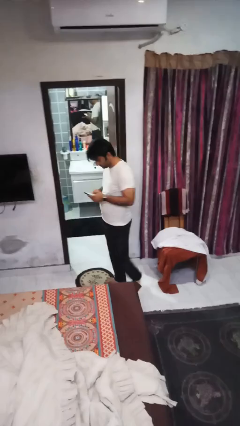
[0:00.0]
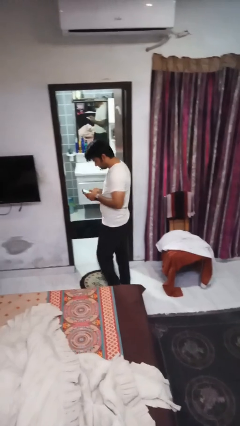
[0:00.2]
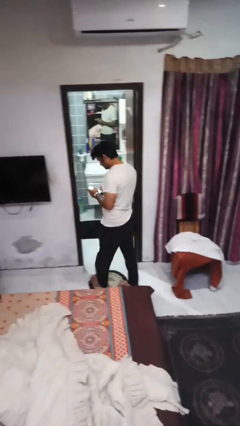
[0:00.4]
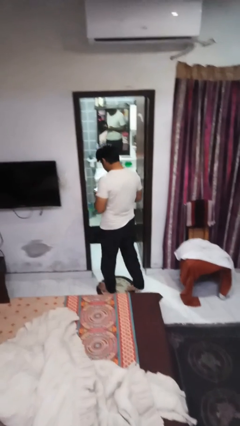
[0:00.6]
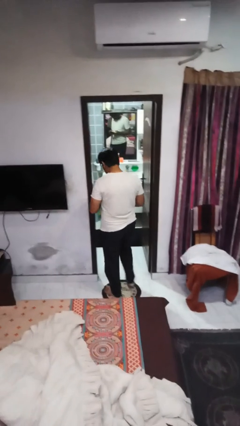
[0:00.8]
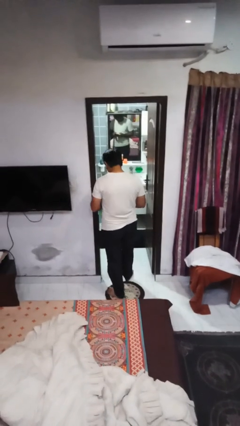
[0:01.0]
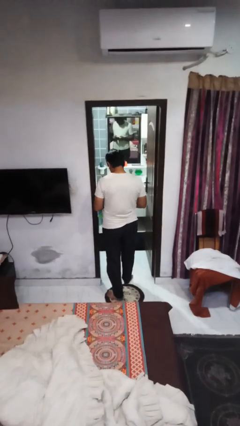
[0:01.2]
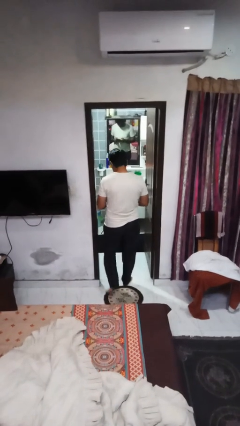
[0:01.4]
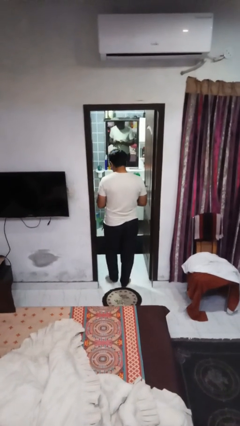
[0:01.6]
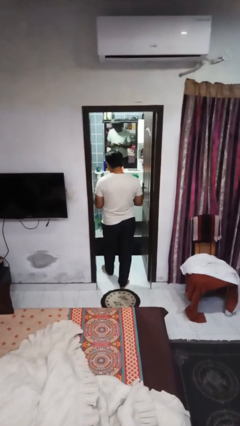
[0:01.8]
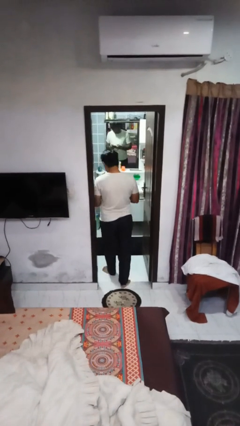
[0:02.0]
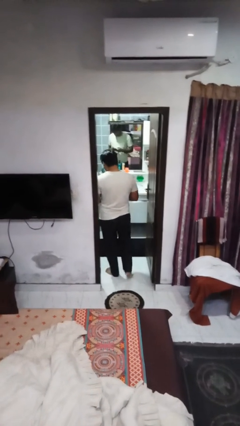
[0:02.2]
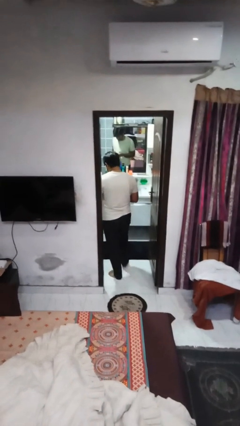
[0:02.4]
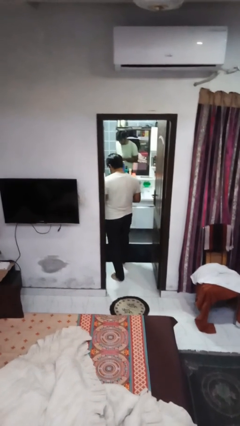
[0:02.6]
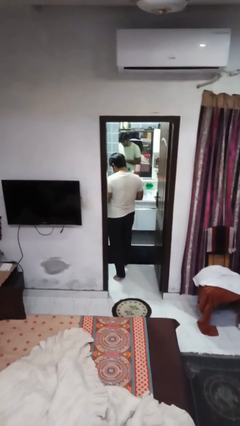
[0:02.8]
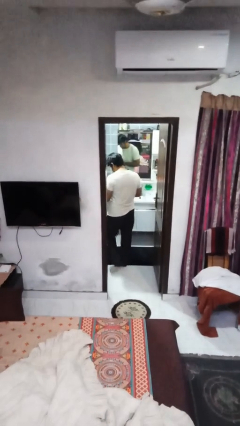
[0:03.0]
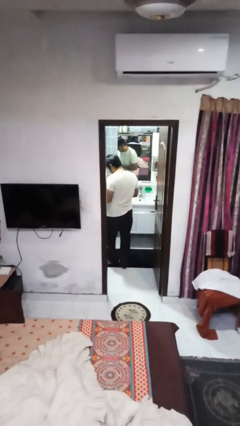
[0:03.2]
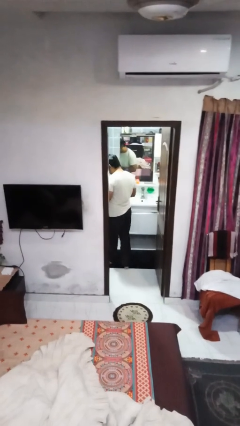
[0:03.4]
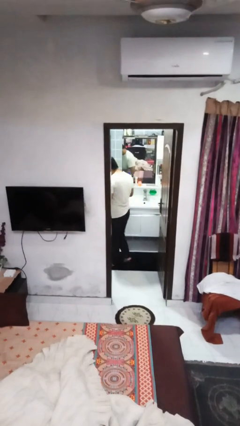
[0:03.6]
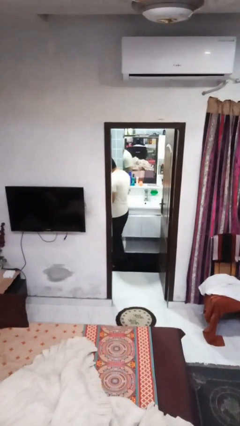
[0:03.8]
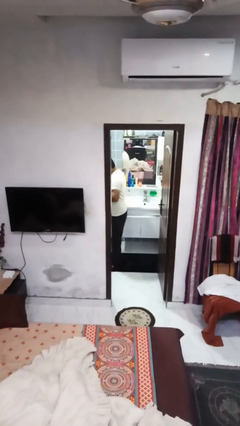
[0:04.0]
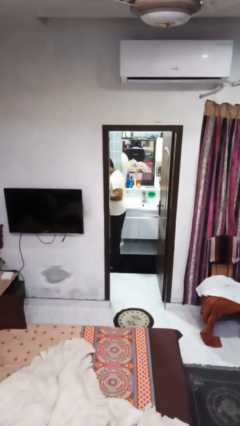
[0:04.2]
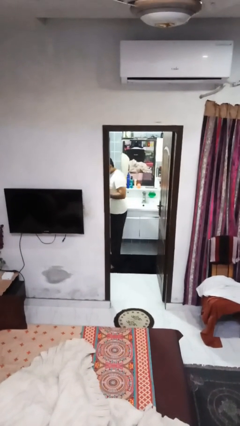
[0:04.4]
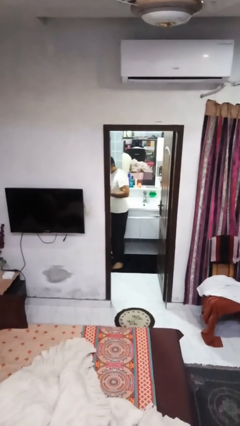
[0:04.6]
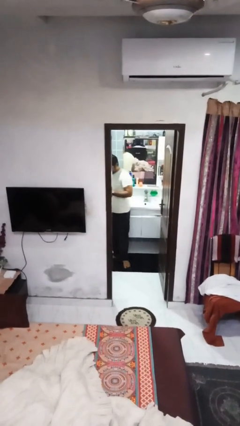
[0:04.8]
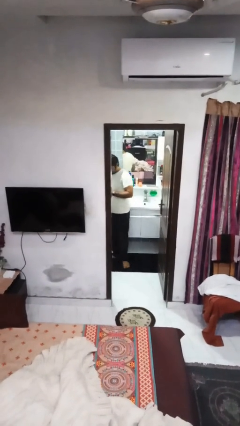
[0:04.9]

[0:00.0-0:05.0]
person exits scene through structure

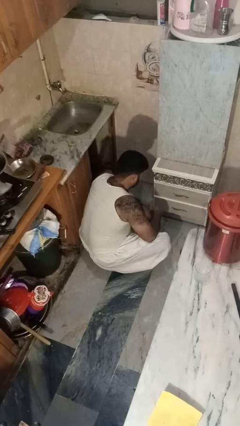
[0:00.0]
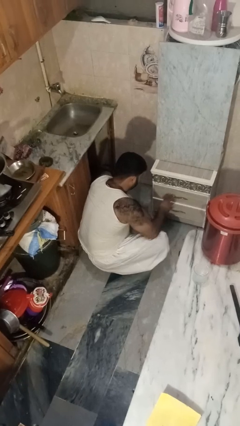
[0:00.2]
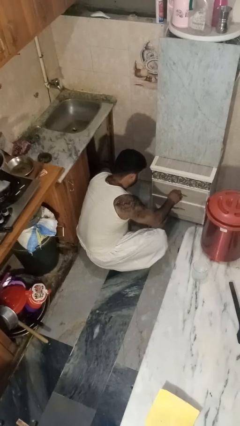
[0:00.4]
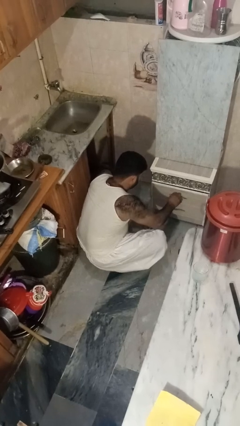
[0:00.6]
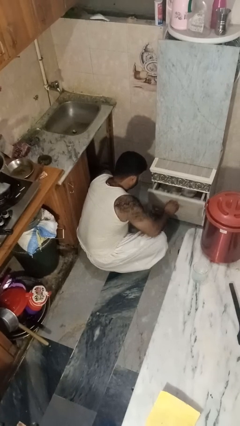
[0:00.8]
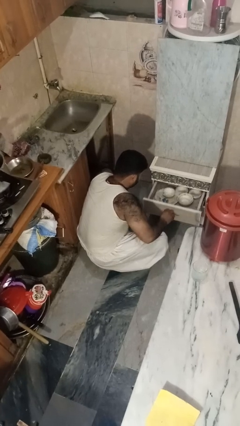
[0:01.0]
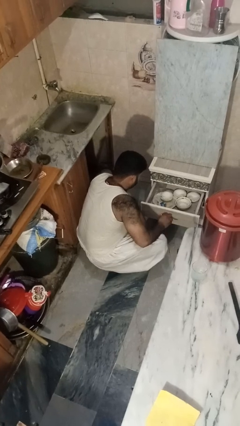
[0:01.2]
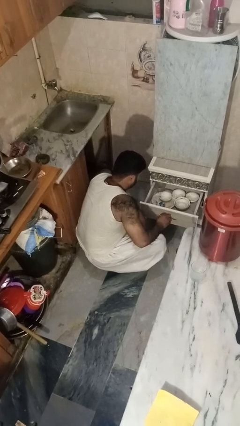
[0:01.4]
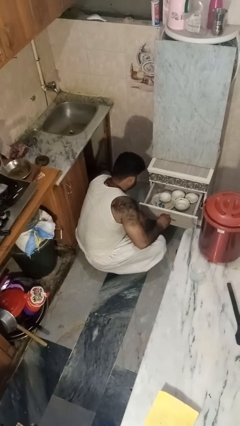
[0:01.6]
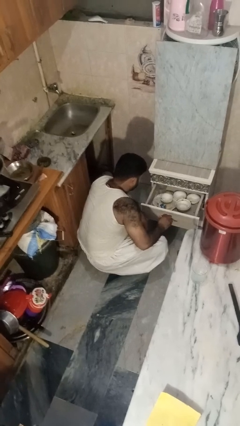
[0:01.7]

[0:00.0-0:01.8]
person opens kitchen drawer

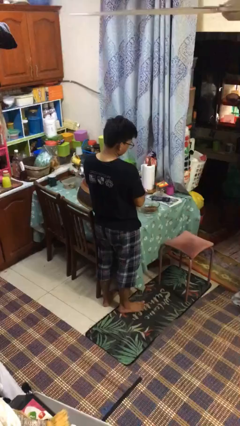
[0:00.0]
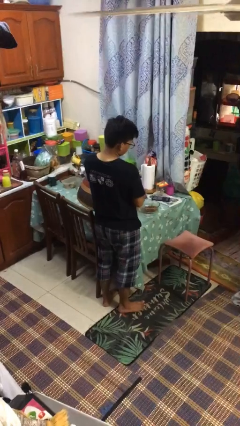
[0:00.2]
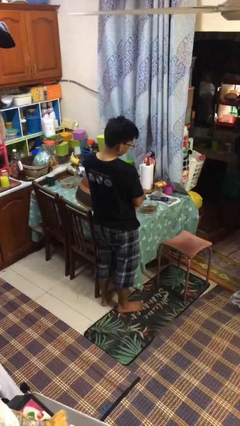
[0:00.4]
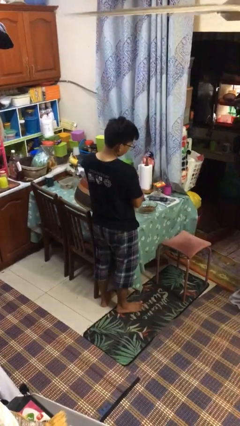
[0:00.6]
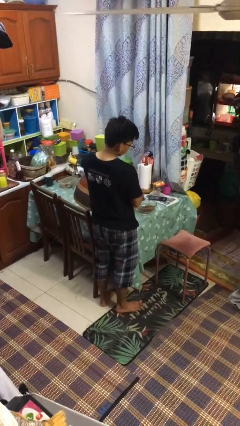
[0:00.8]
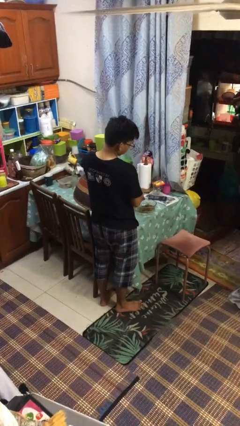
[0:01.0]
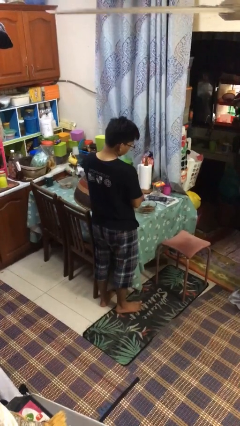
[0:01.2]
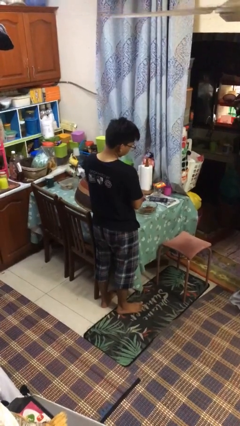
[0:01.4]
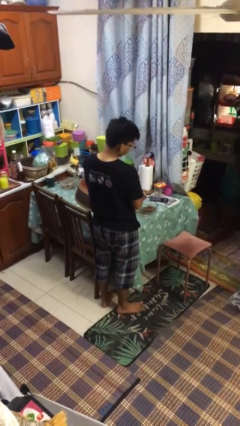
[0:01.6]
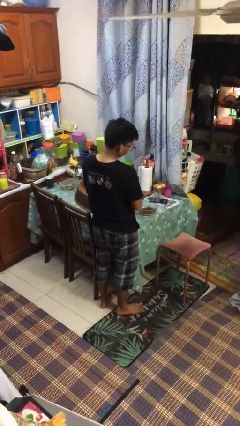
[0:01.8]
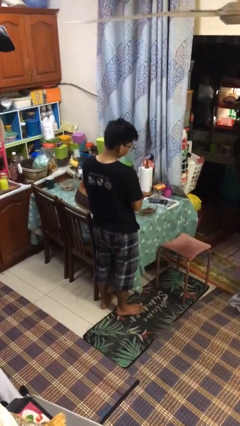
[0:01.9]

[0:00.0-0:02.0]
person pours into bowl

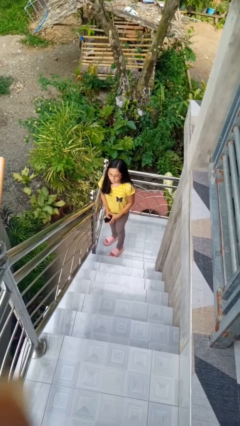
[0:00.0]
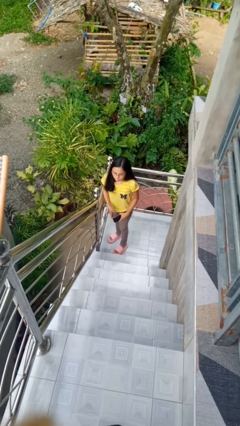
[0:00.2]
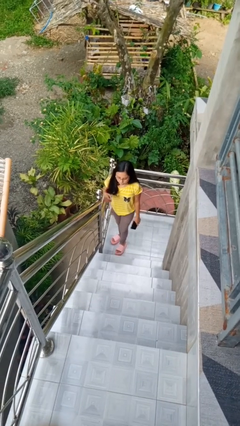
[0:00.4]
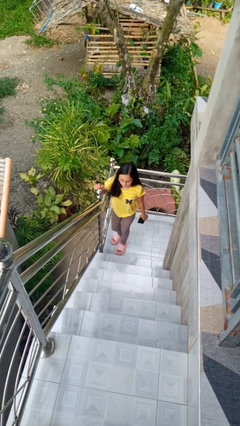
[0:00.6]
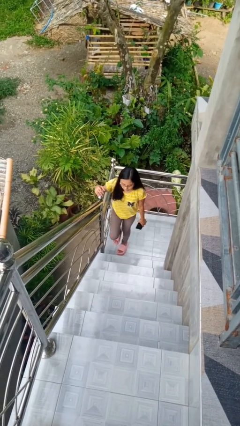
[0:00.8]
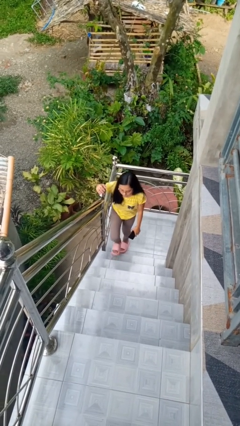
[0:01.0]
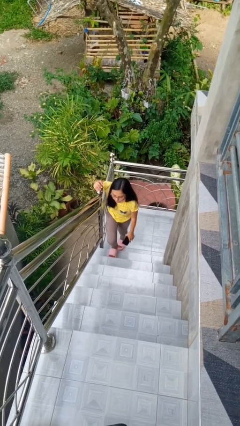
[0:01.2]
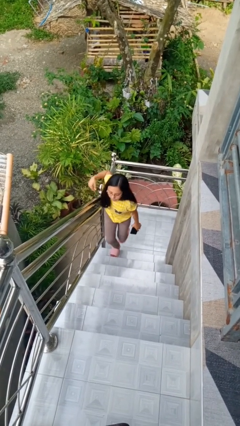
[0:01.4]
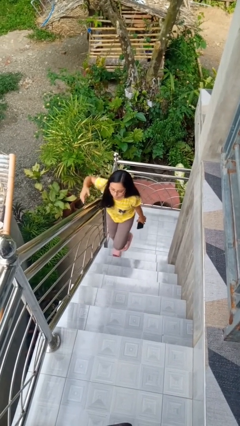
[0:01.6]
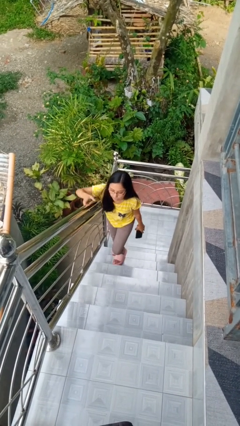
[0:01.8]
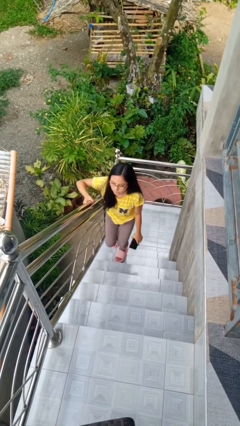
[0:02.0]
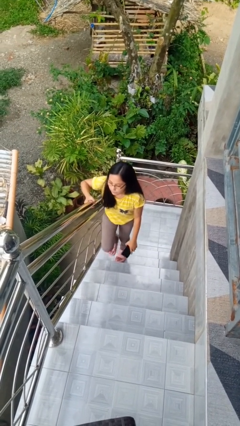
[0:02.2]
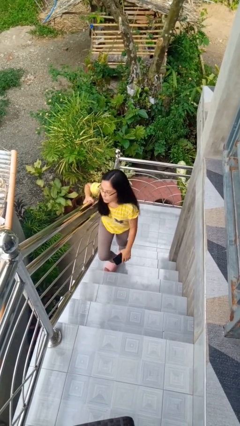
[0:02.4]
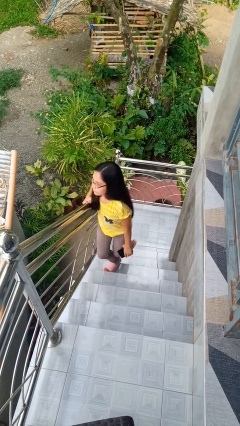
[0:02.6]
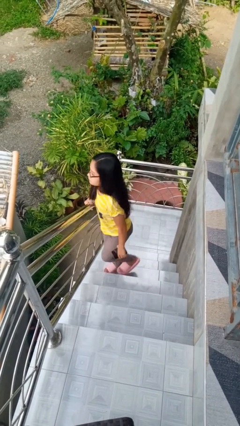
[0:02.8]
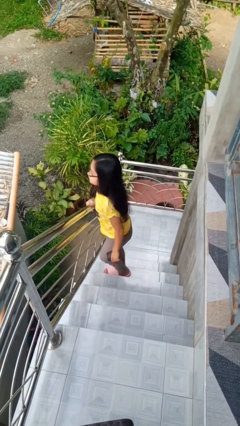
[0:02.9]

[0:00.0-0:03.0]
person climbs up stairs

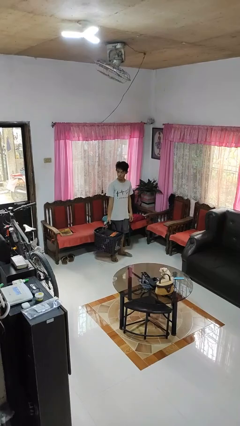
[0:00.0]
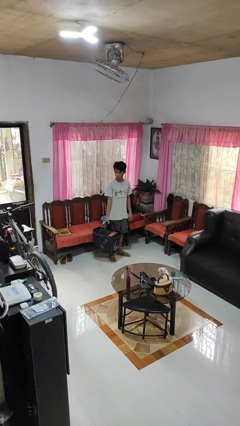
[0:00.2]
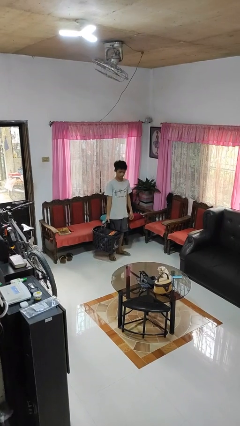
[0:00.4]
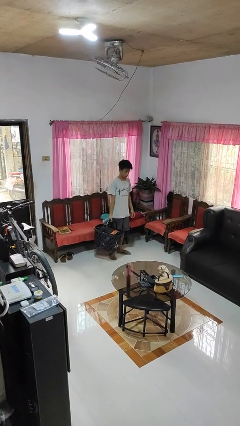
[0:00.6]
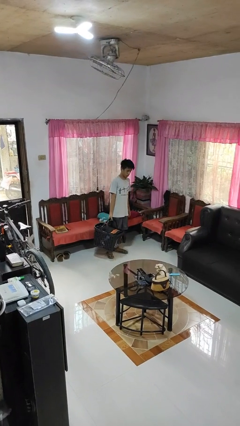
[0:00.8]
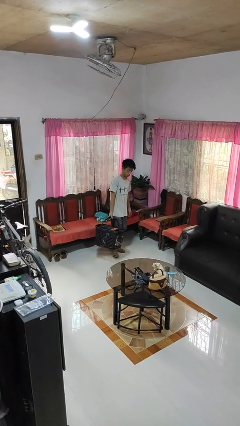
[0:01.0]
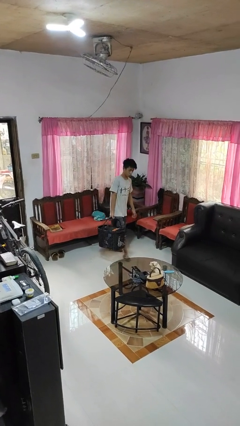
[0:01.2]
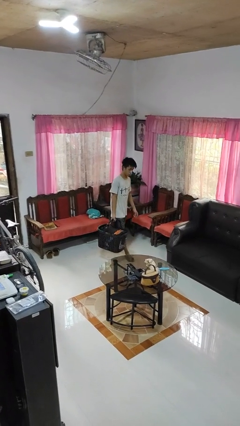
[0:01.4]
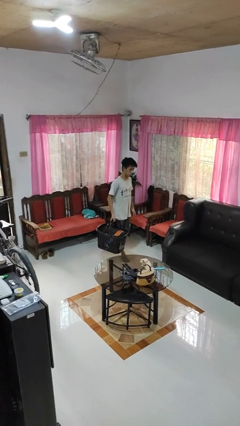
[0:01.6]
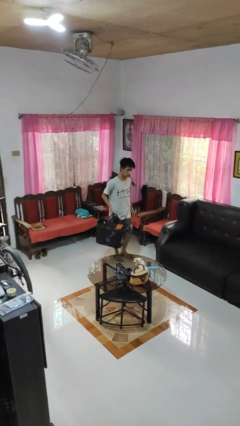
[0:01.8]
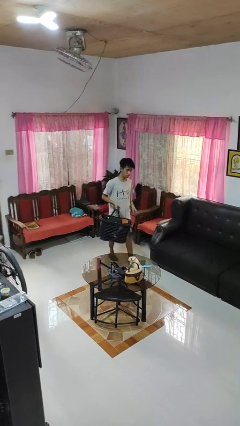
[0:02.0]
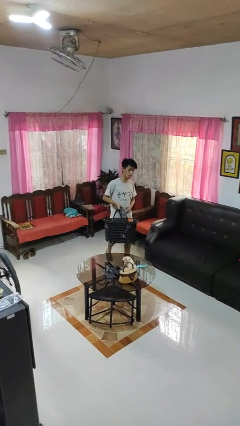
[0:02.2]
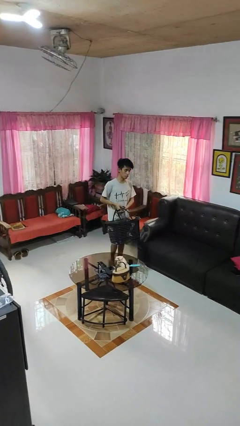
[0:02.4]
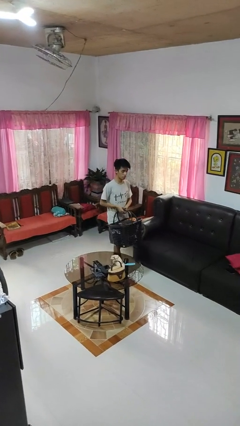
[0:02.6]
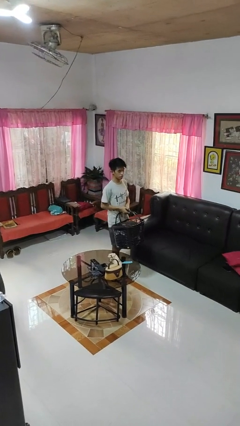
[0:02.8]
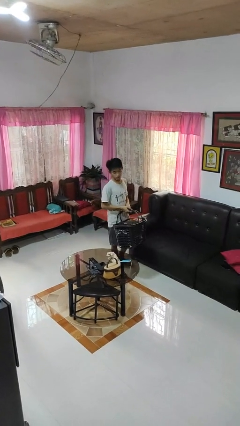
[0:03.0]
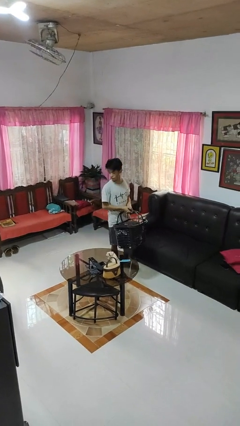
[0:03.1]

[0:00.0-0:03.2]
person carries laundry basket

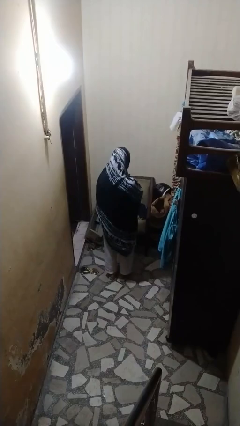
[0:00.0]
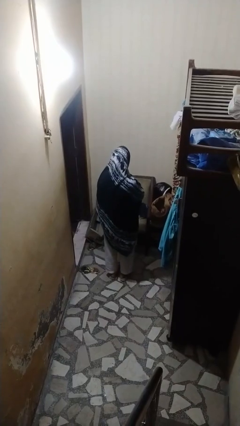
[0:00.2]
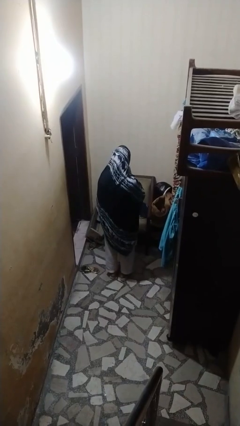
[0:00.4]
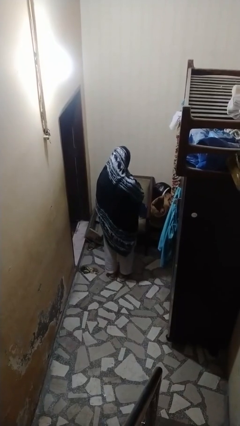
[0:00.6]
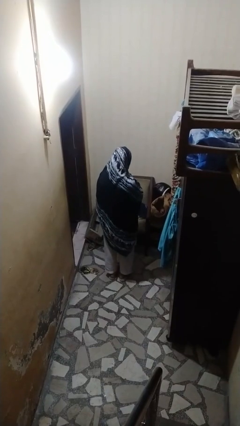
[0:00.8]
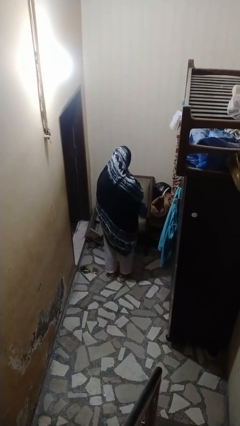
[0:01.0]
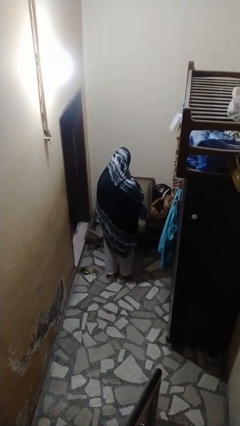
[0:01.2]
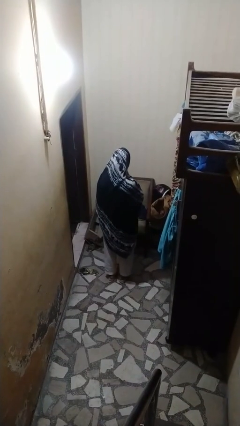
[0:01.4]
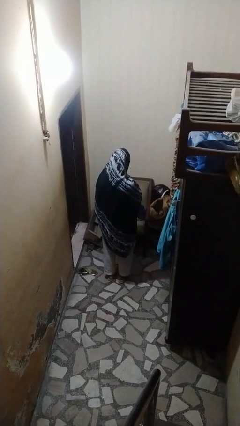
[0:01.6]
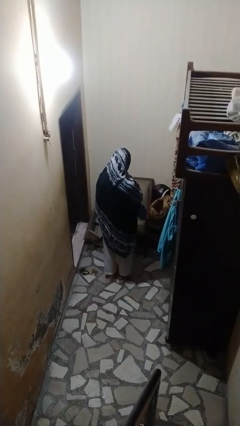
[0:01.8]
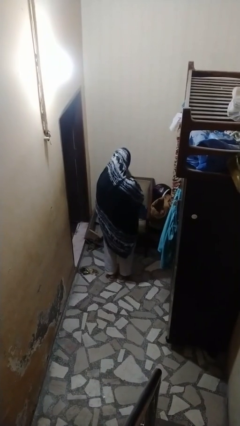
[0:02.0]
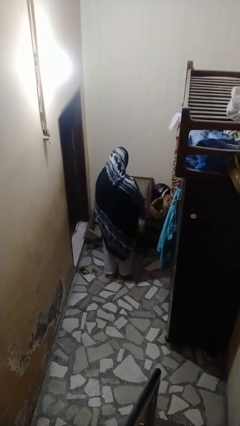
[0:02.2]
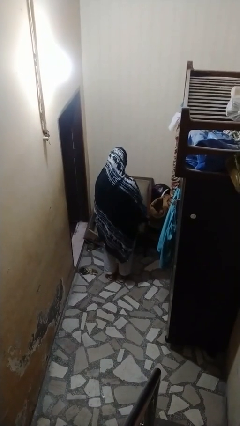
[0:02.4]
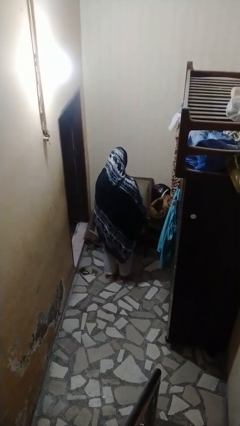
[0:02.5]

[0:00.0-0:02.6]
person strokes chin
